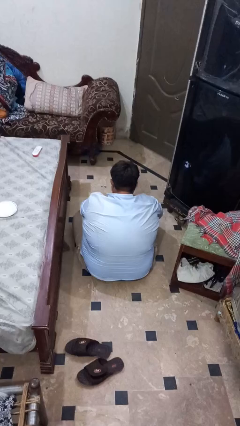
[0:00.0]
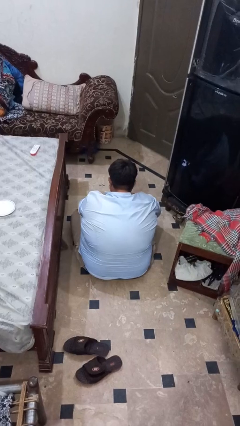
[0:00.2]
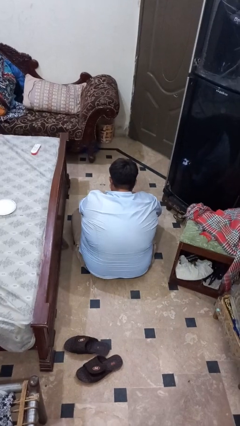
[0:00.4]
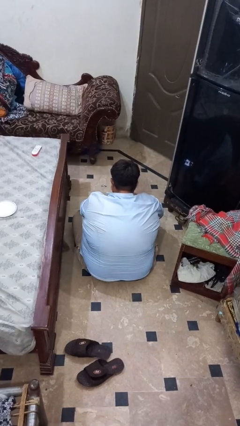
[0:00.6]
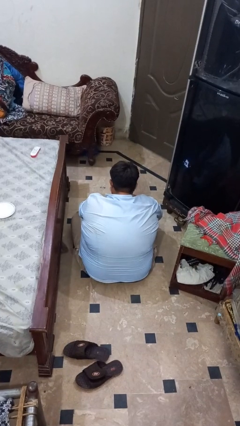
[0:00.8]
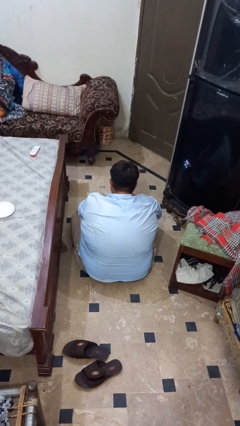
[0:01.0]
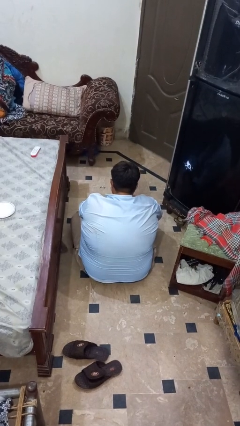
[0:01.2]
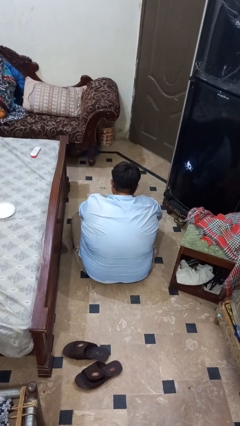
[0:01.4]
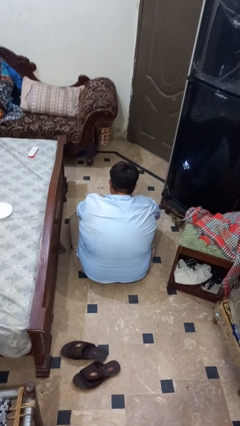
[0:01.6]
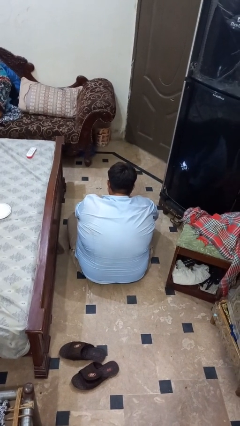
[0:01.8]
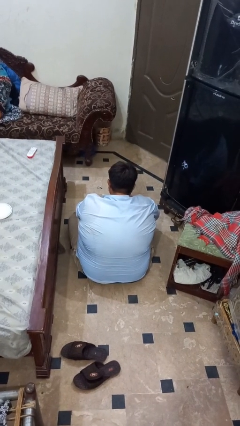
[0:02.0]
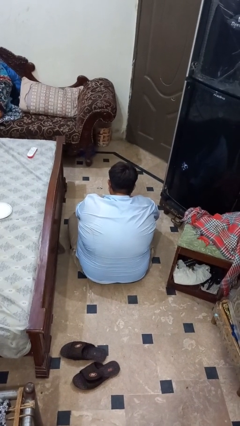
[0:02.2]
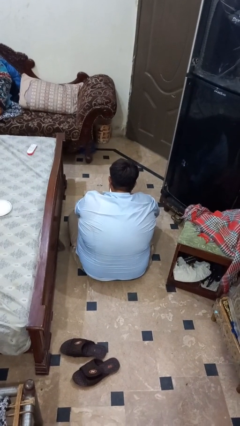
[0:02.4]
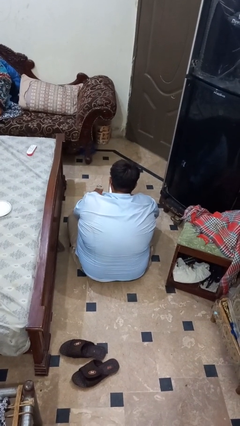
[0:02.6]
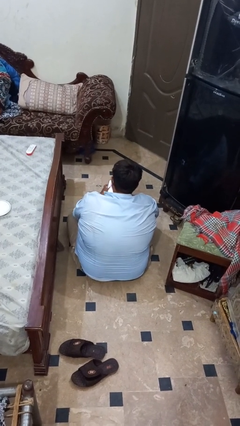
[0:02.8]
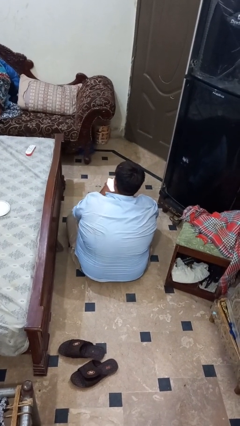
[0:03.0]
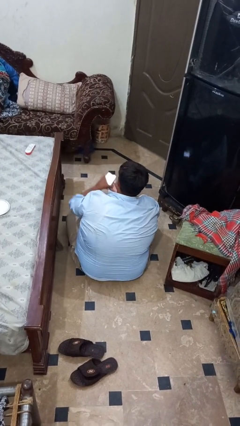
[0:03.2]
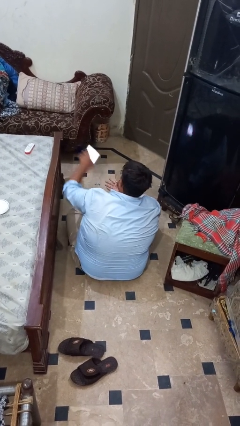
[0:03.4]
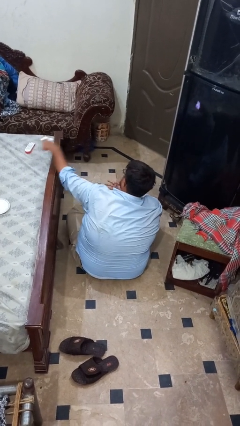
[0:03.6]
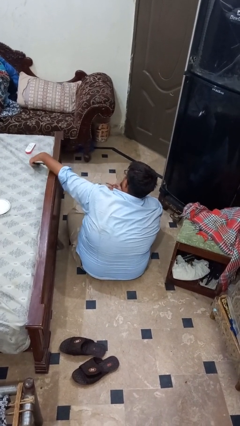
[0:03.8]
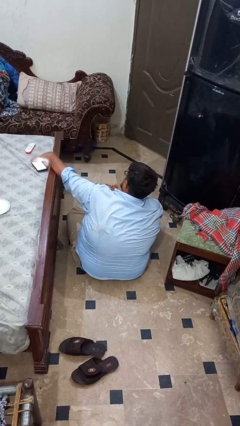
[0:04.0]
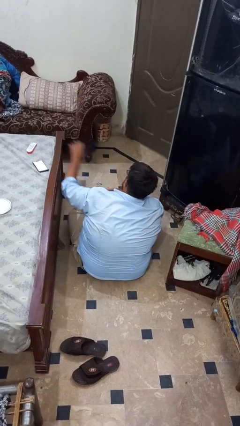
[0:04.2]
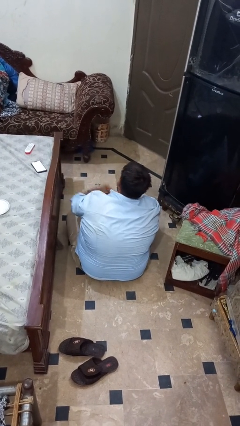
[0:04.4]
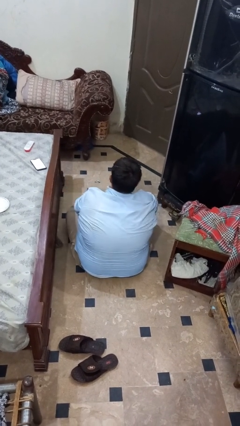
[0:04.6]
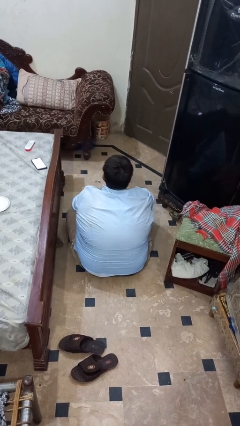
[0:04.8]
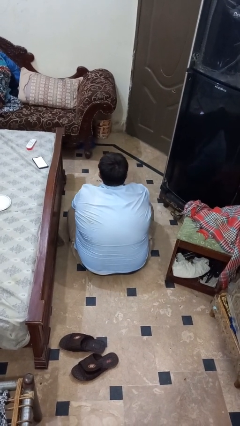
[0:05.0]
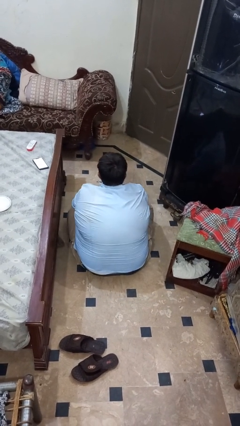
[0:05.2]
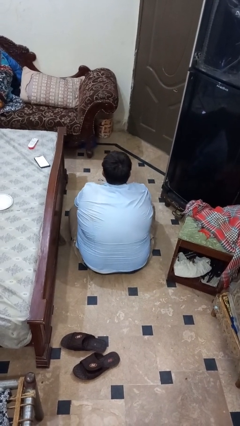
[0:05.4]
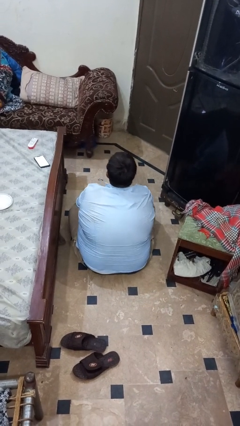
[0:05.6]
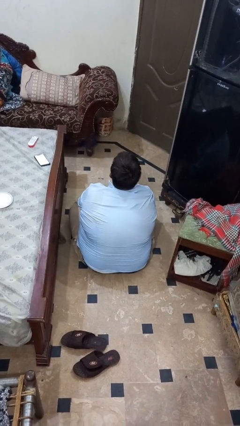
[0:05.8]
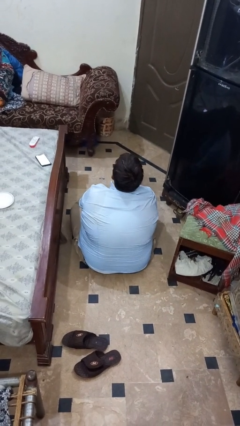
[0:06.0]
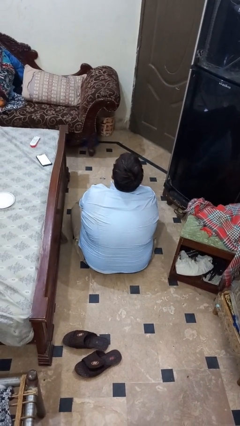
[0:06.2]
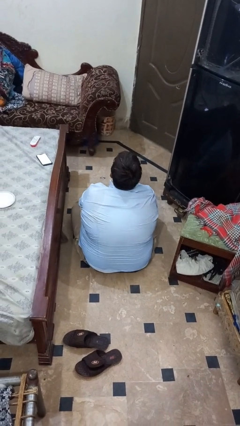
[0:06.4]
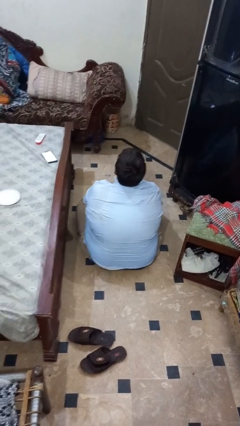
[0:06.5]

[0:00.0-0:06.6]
person sticks out tongue

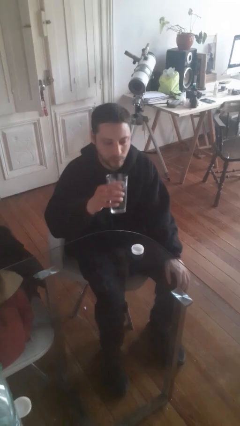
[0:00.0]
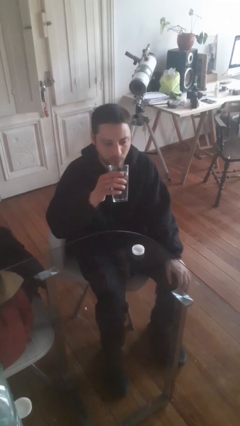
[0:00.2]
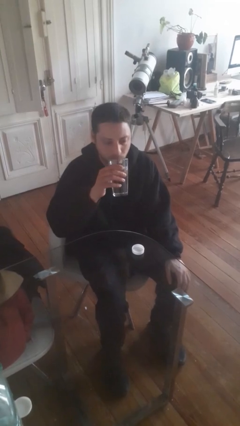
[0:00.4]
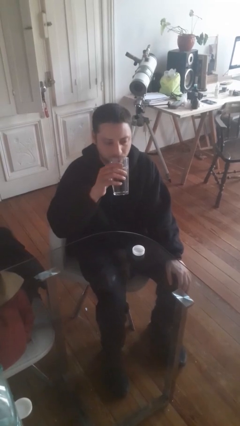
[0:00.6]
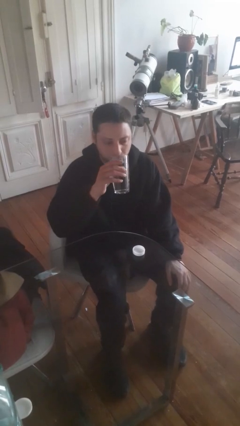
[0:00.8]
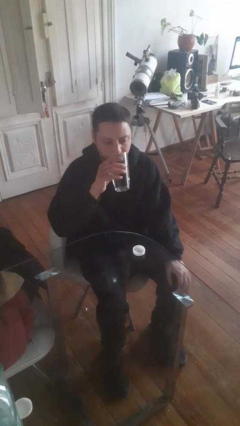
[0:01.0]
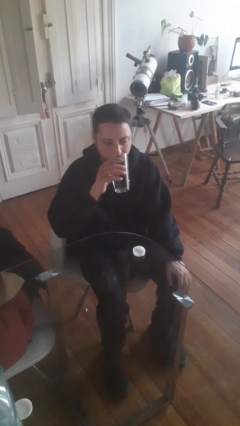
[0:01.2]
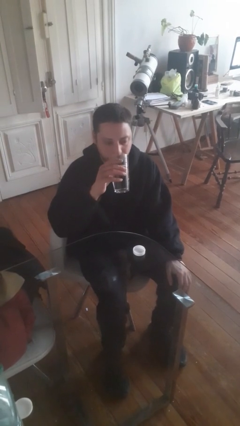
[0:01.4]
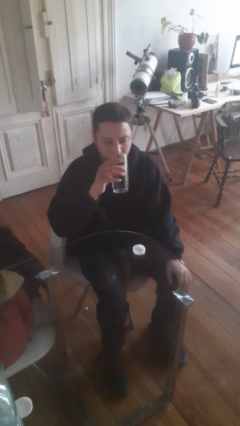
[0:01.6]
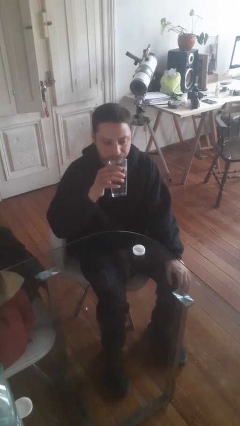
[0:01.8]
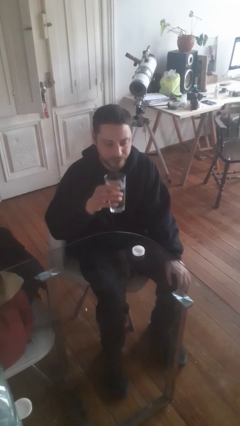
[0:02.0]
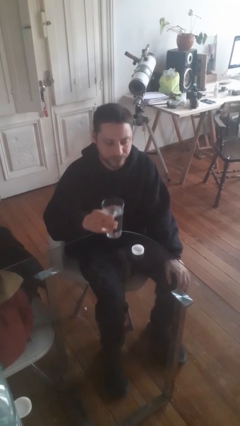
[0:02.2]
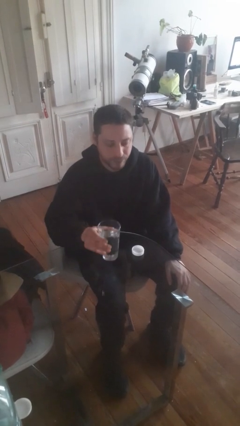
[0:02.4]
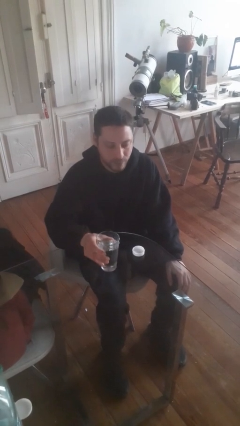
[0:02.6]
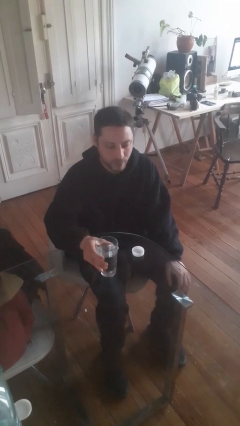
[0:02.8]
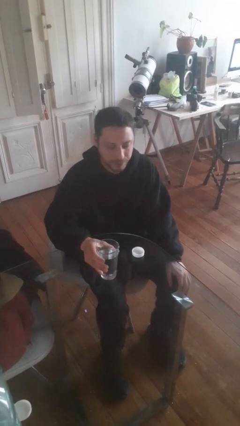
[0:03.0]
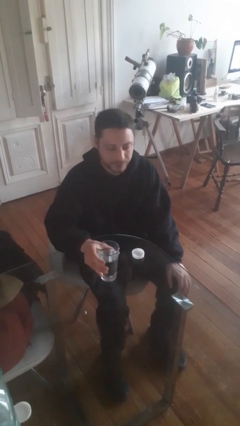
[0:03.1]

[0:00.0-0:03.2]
person drinks from cup

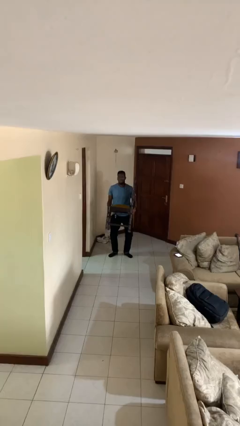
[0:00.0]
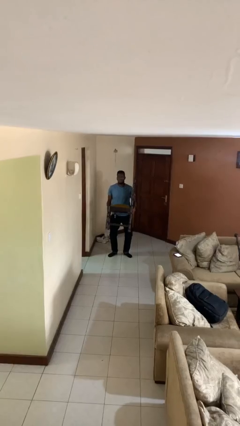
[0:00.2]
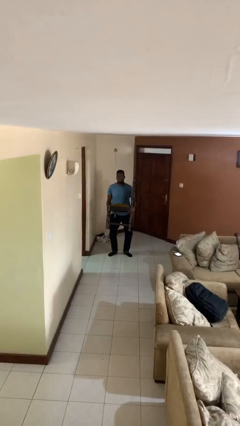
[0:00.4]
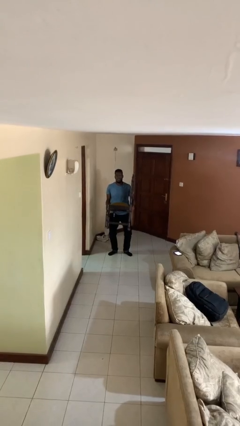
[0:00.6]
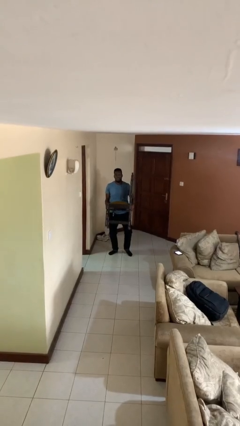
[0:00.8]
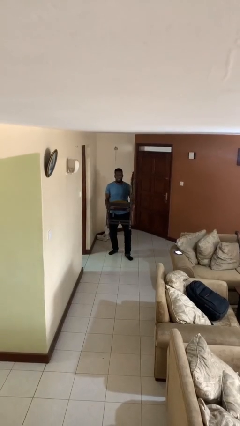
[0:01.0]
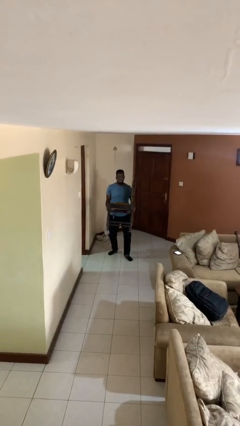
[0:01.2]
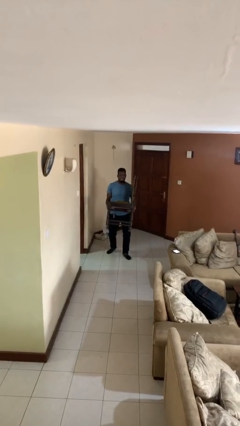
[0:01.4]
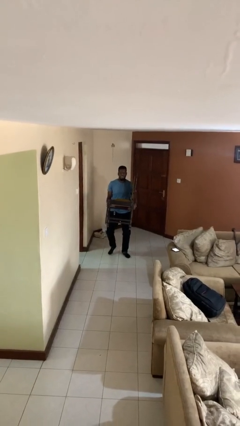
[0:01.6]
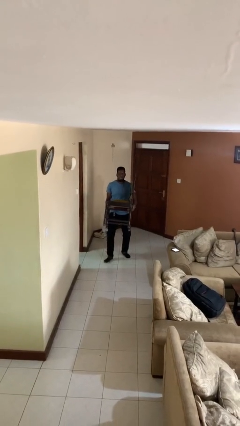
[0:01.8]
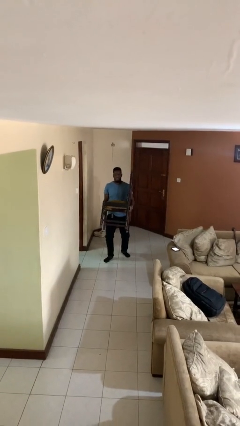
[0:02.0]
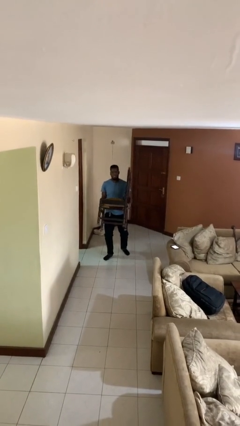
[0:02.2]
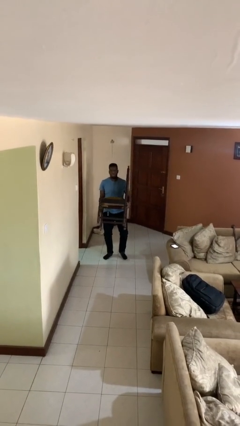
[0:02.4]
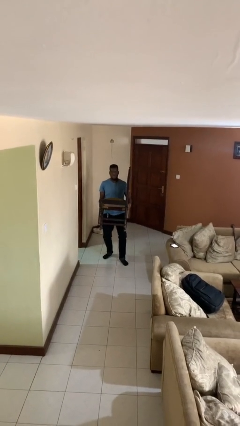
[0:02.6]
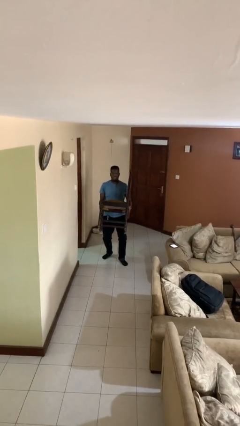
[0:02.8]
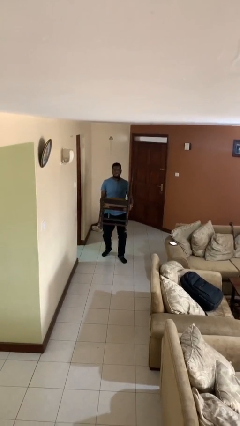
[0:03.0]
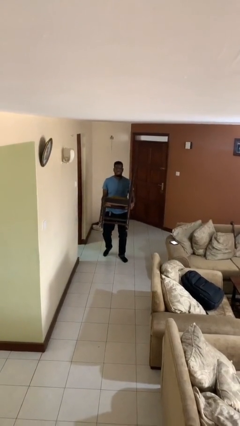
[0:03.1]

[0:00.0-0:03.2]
person carries heavy object

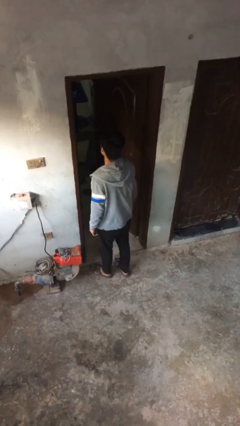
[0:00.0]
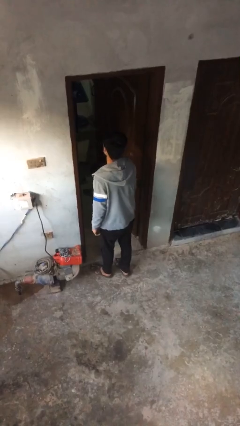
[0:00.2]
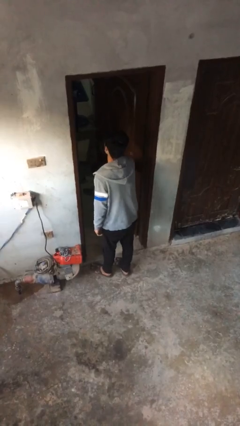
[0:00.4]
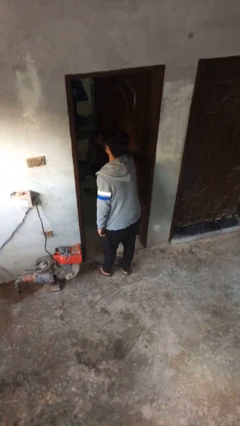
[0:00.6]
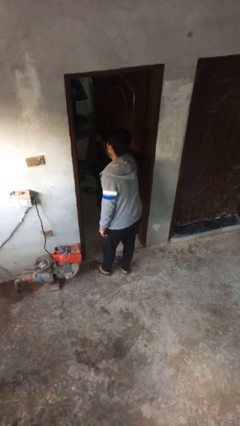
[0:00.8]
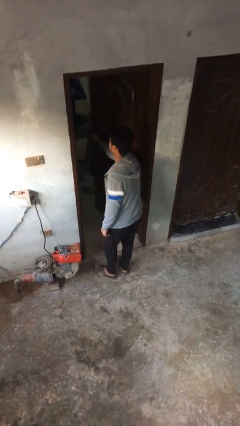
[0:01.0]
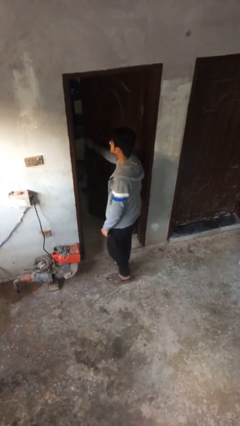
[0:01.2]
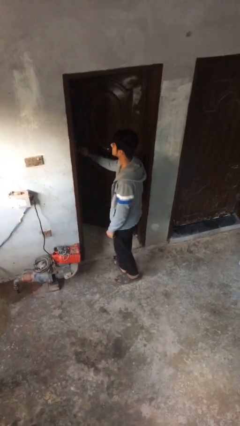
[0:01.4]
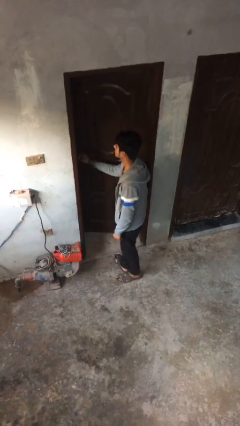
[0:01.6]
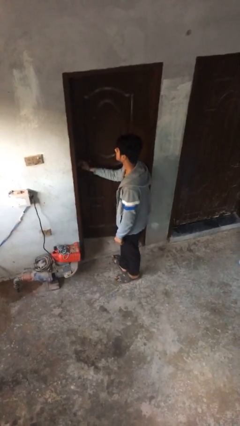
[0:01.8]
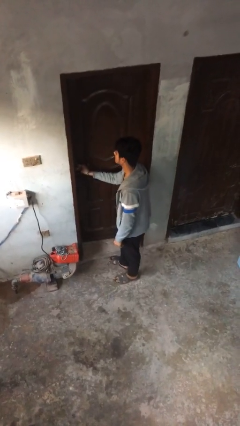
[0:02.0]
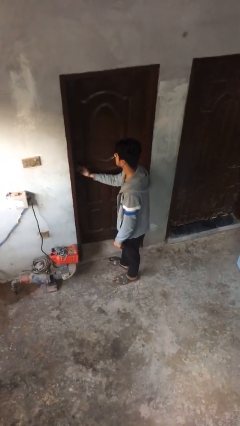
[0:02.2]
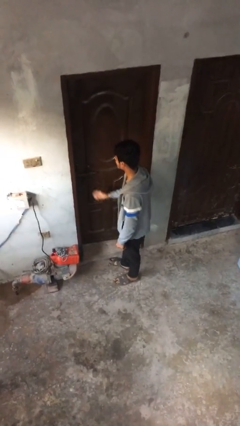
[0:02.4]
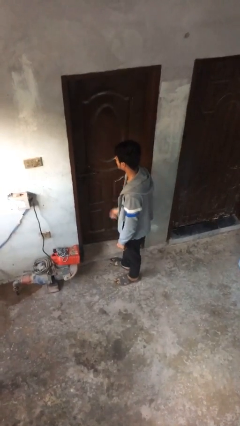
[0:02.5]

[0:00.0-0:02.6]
person closes facility door

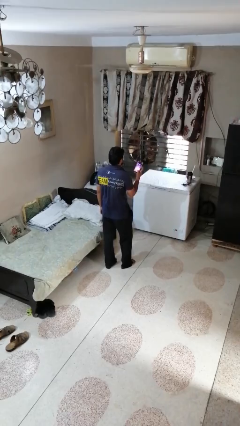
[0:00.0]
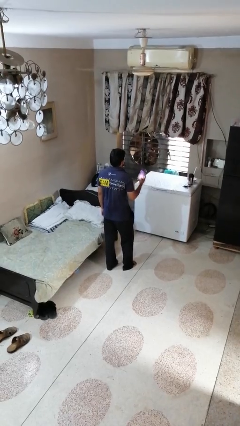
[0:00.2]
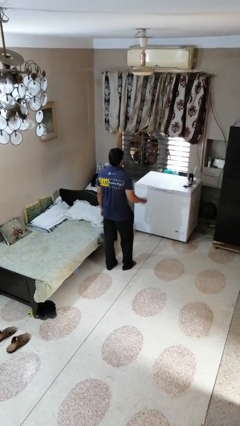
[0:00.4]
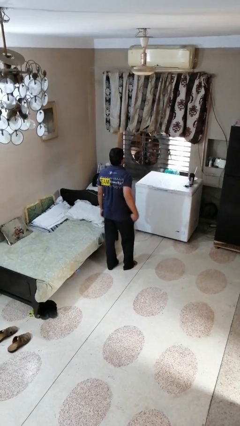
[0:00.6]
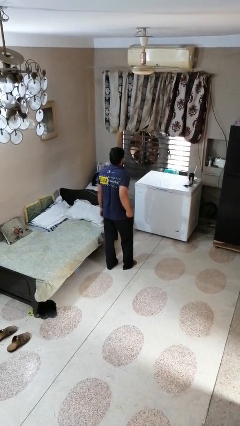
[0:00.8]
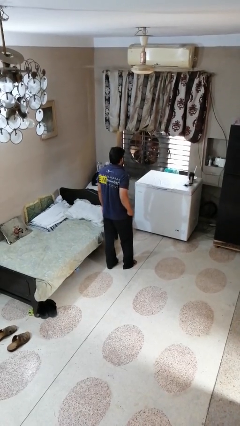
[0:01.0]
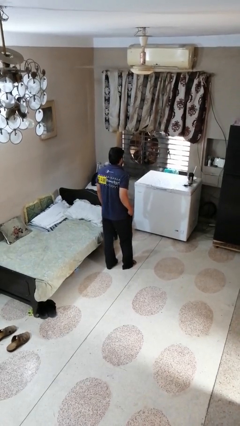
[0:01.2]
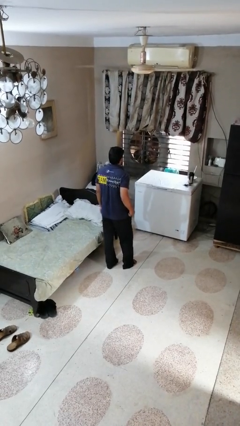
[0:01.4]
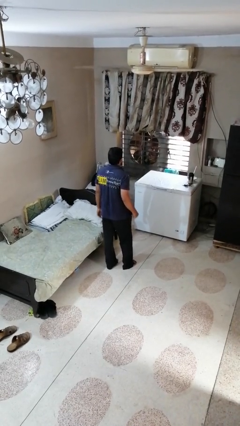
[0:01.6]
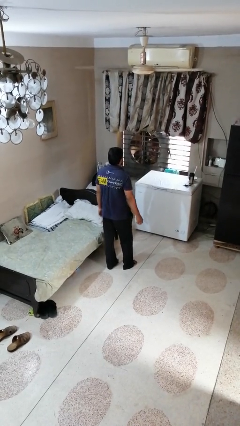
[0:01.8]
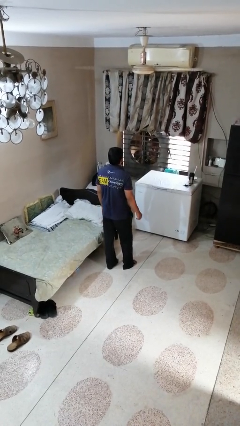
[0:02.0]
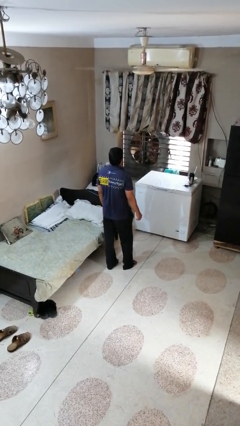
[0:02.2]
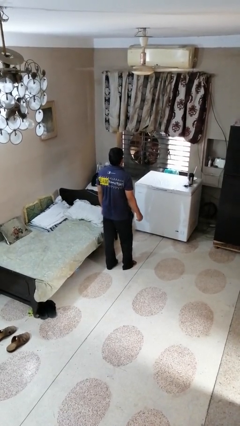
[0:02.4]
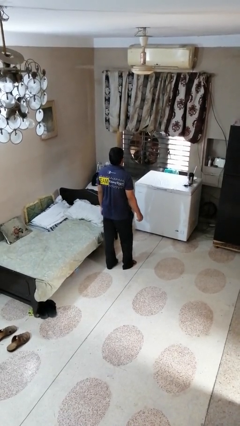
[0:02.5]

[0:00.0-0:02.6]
person puts phone into pocket
